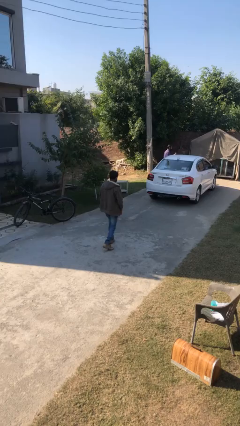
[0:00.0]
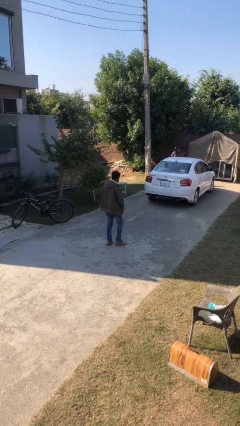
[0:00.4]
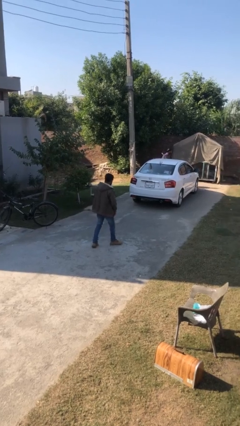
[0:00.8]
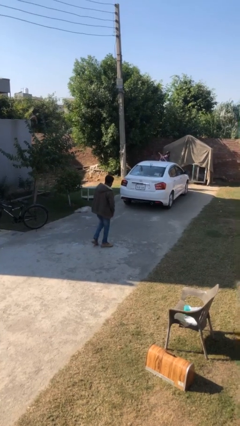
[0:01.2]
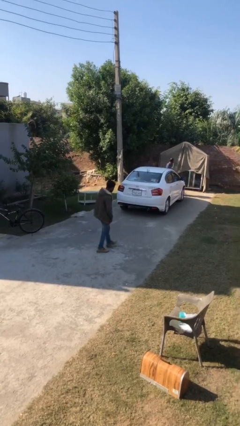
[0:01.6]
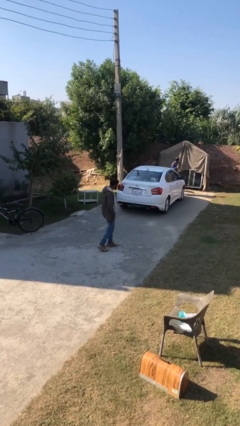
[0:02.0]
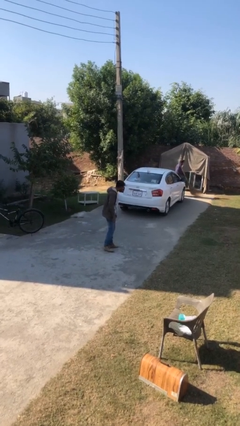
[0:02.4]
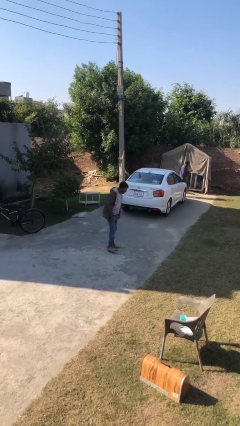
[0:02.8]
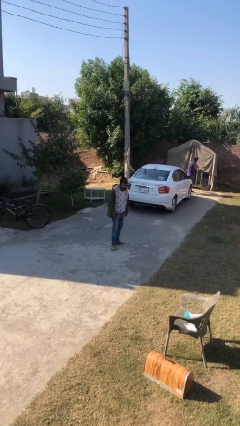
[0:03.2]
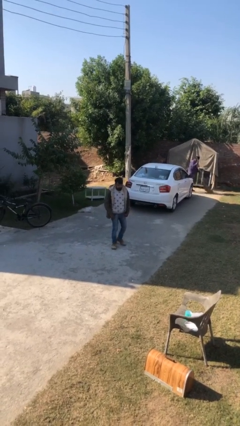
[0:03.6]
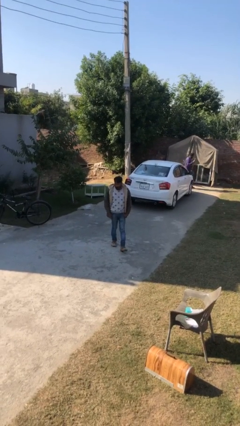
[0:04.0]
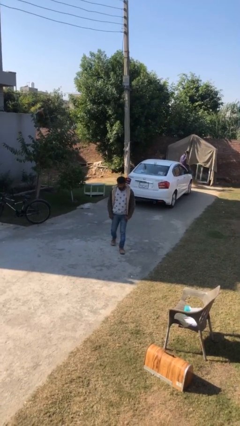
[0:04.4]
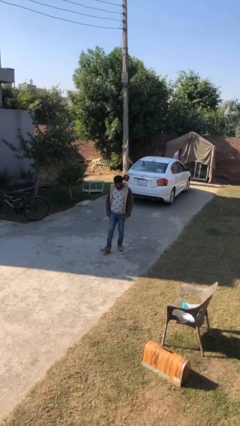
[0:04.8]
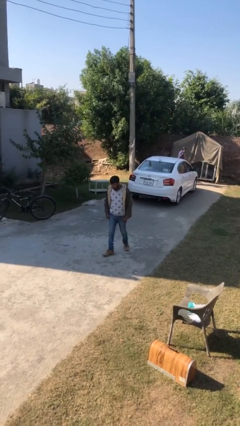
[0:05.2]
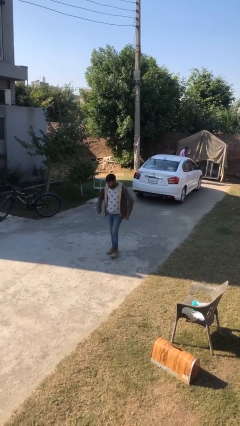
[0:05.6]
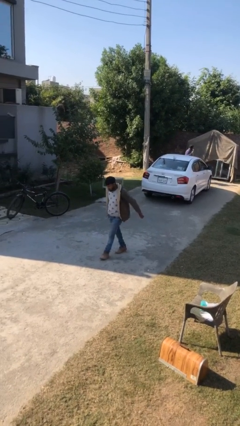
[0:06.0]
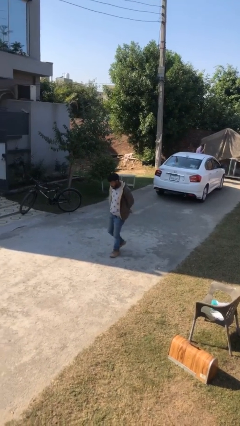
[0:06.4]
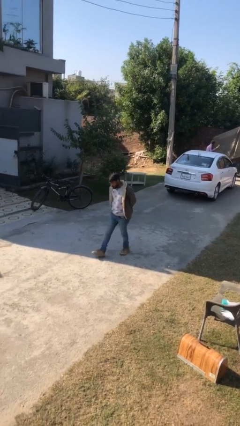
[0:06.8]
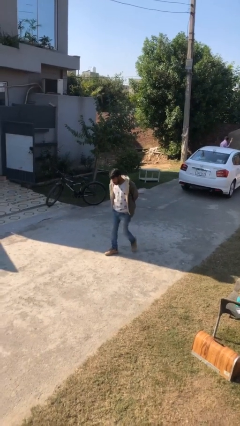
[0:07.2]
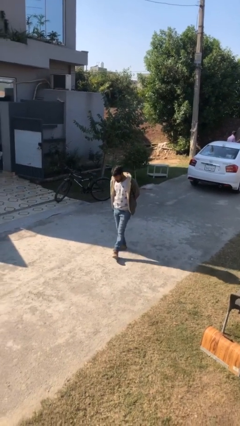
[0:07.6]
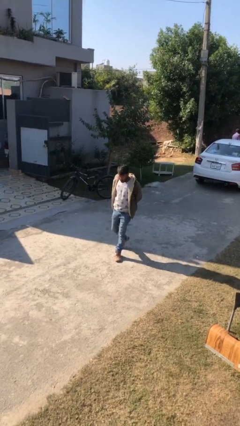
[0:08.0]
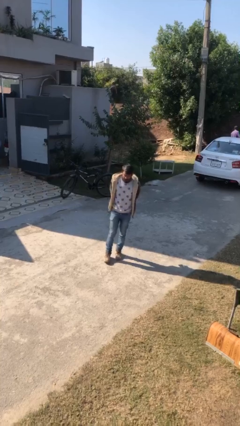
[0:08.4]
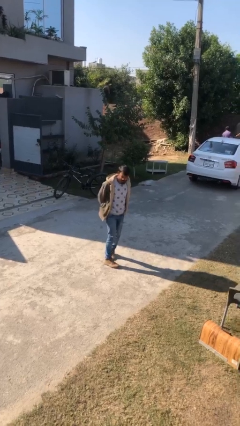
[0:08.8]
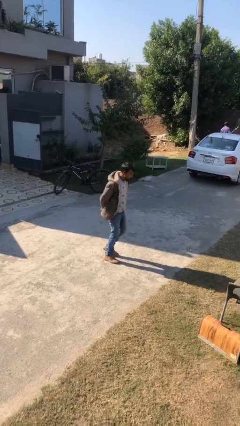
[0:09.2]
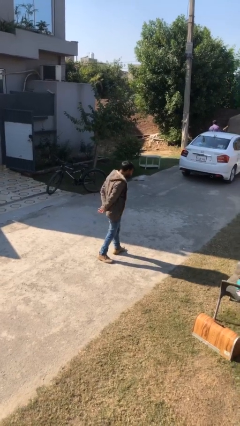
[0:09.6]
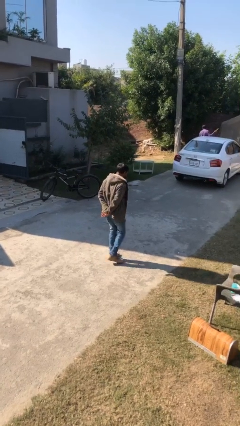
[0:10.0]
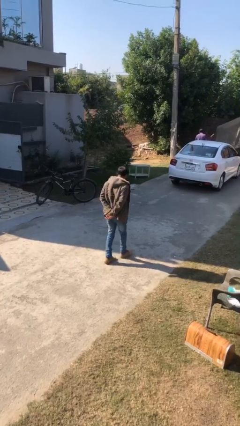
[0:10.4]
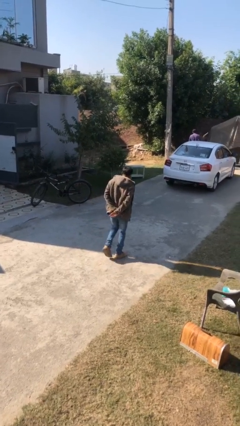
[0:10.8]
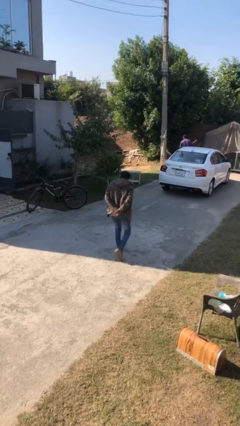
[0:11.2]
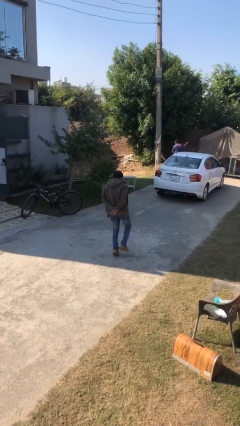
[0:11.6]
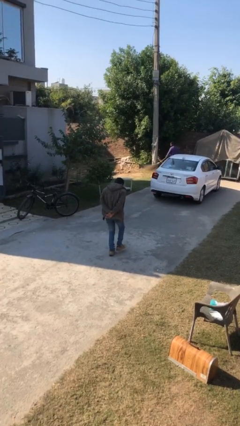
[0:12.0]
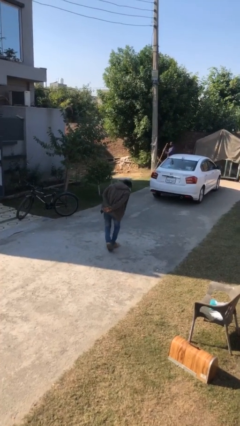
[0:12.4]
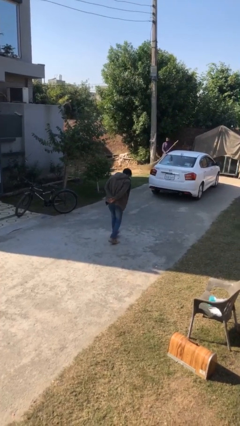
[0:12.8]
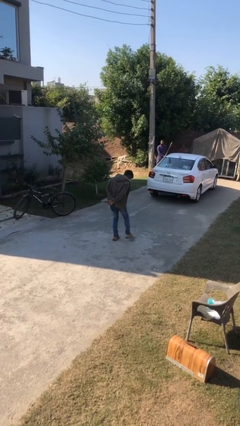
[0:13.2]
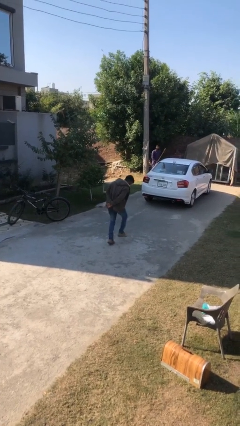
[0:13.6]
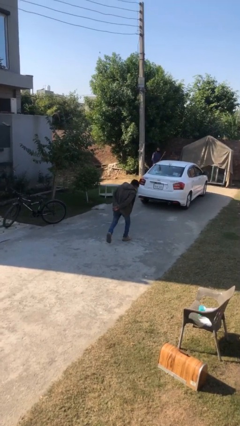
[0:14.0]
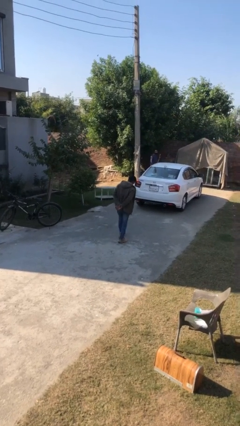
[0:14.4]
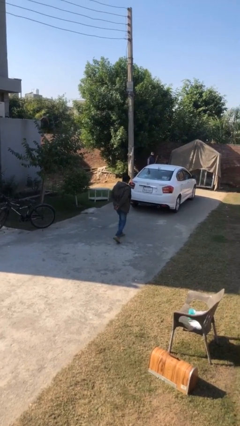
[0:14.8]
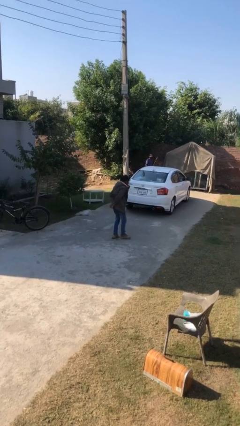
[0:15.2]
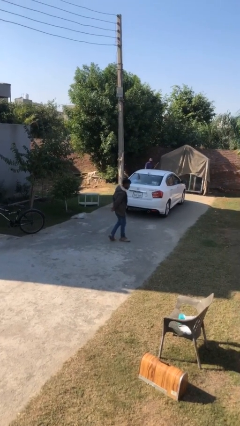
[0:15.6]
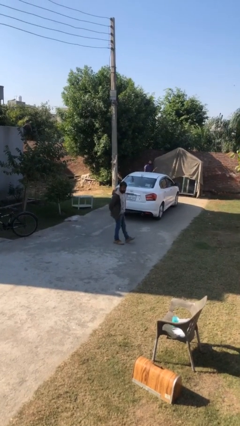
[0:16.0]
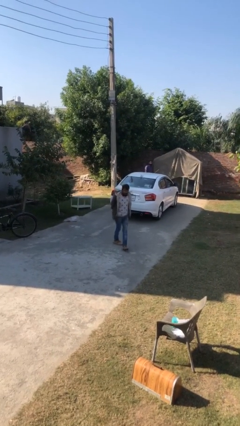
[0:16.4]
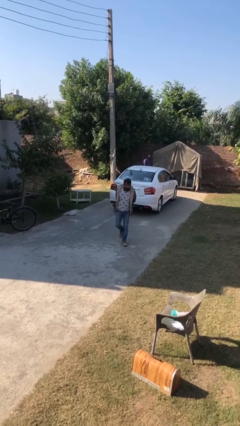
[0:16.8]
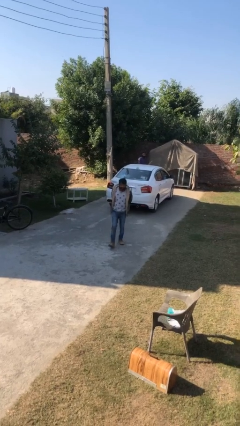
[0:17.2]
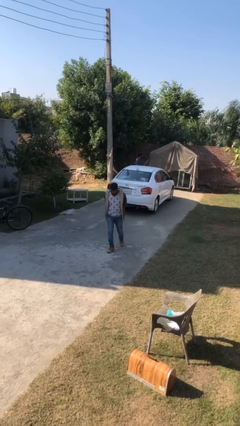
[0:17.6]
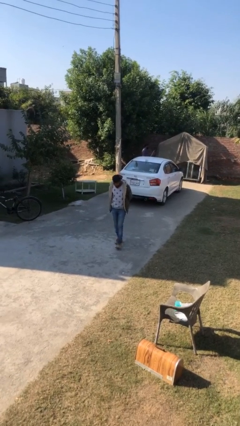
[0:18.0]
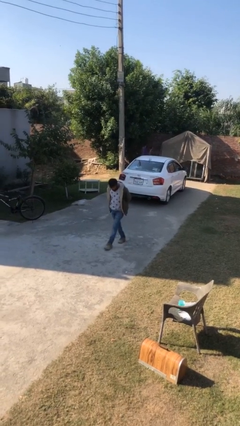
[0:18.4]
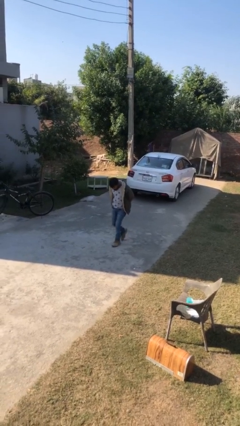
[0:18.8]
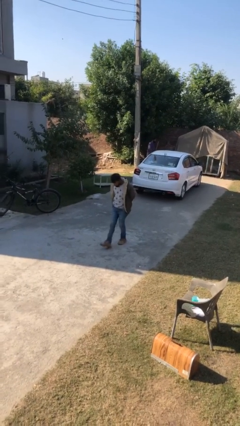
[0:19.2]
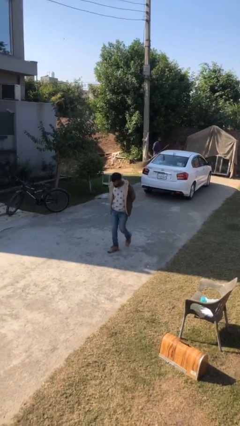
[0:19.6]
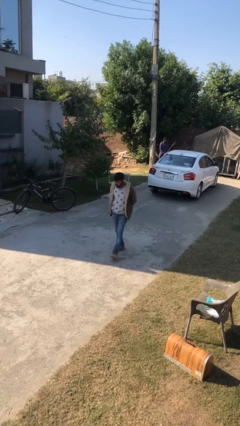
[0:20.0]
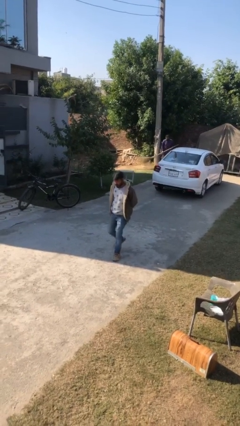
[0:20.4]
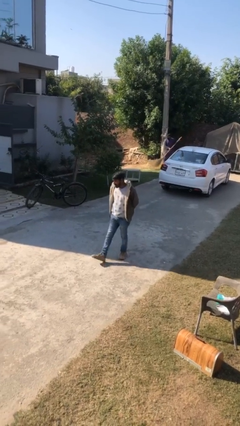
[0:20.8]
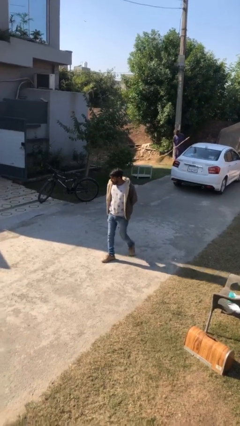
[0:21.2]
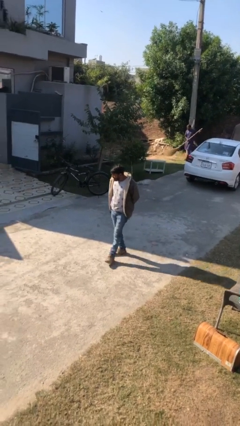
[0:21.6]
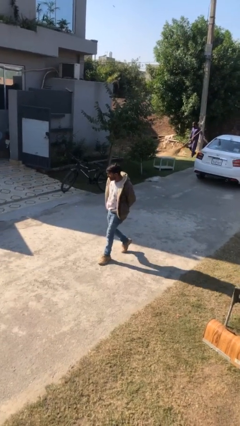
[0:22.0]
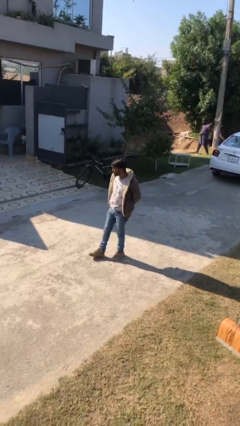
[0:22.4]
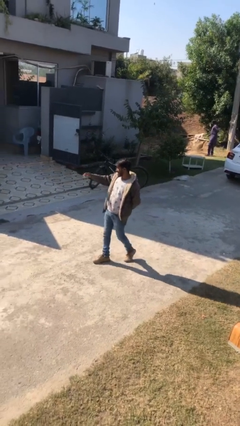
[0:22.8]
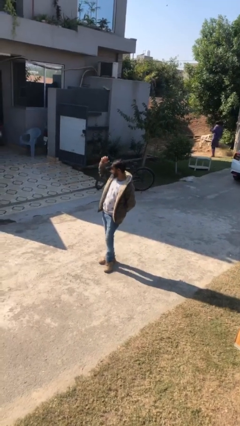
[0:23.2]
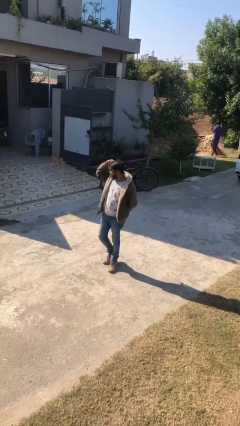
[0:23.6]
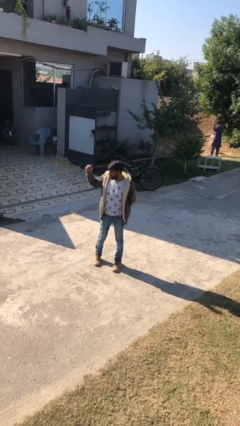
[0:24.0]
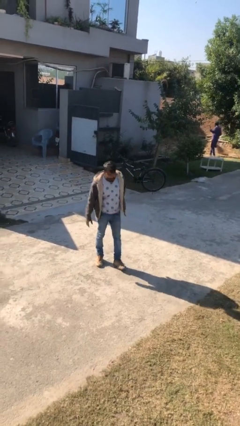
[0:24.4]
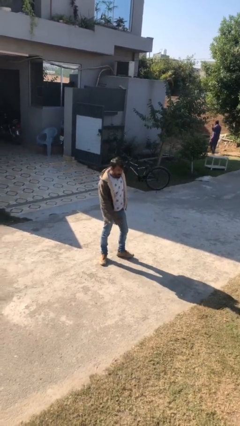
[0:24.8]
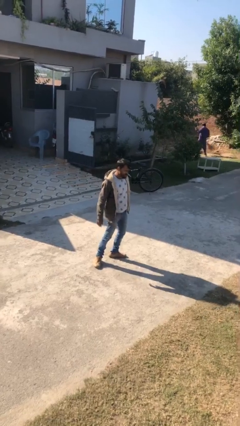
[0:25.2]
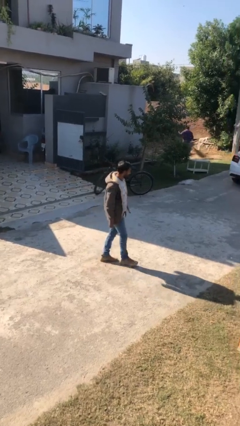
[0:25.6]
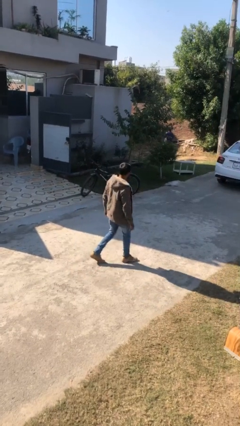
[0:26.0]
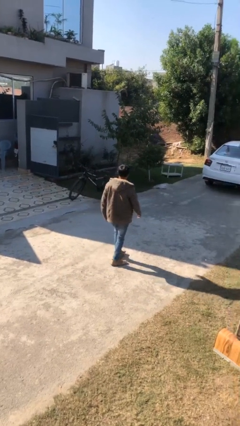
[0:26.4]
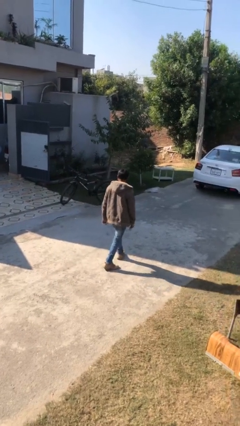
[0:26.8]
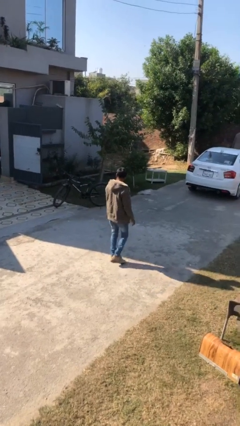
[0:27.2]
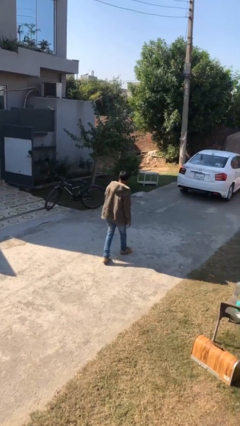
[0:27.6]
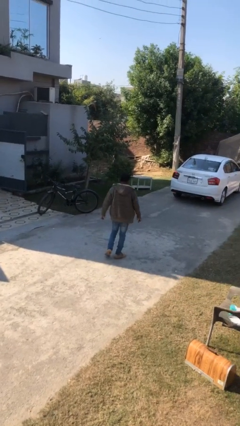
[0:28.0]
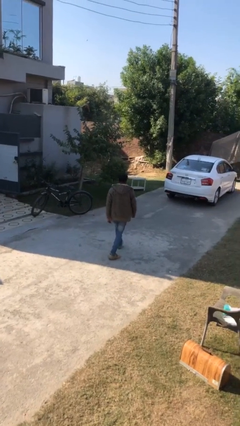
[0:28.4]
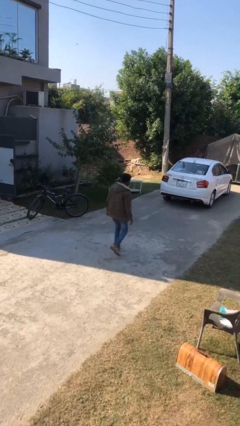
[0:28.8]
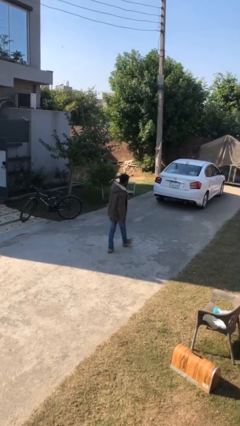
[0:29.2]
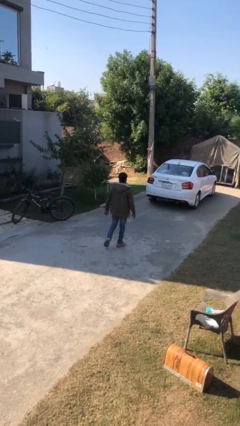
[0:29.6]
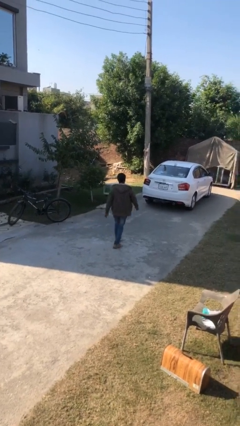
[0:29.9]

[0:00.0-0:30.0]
person walks

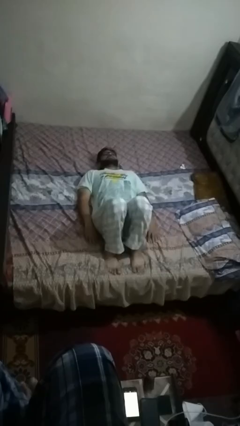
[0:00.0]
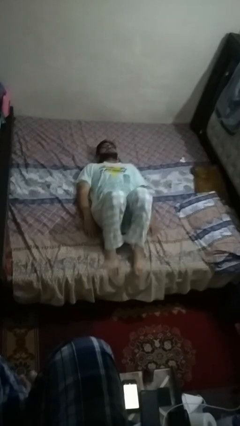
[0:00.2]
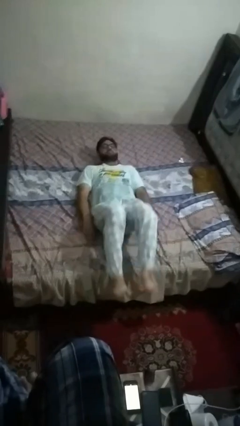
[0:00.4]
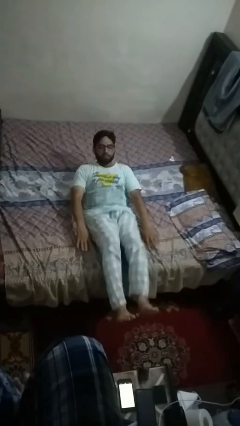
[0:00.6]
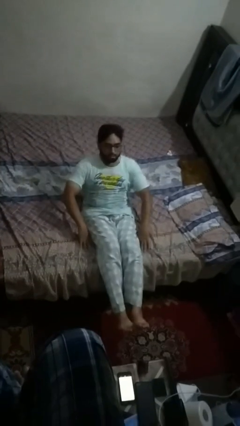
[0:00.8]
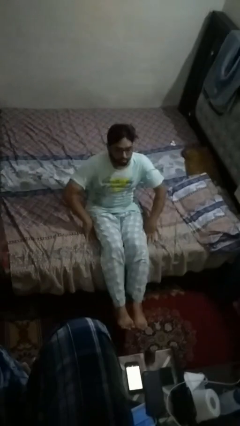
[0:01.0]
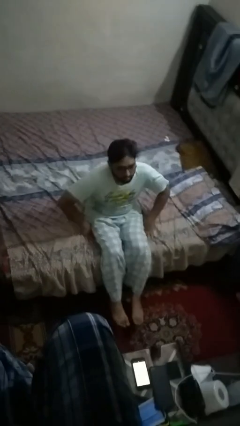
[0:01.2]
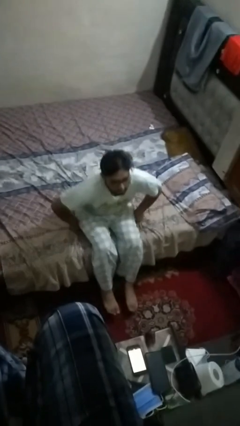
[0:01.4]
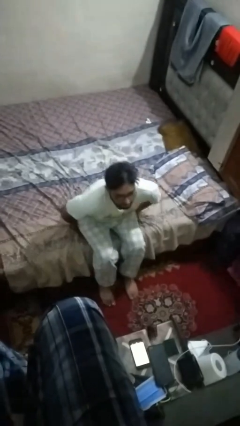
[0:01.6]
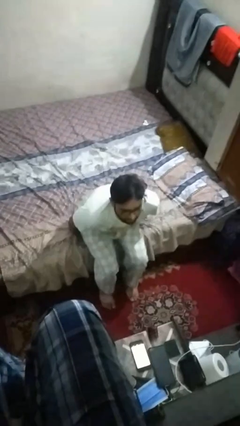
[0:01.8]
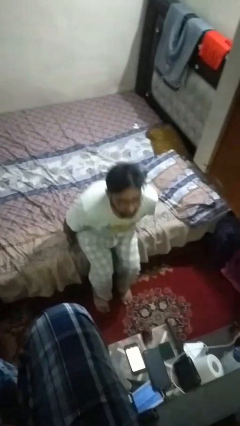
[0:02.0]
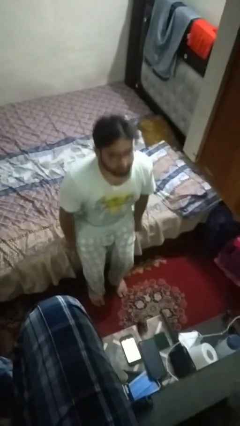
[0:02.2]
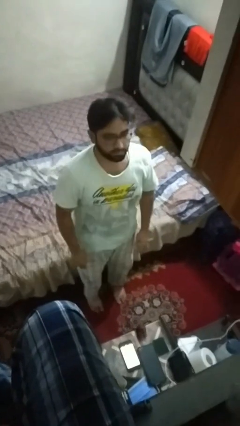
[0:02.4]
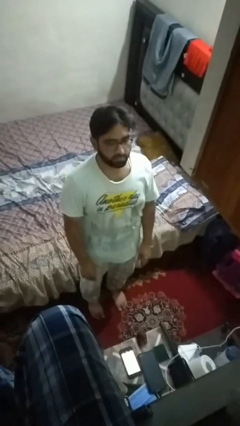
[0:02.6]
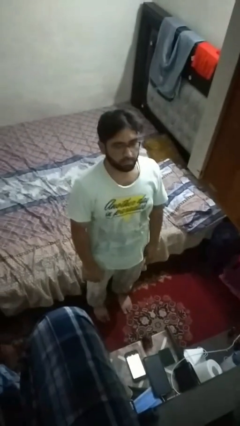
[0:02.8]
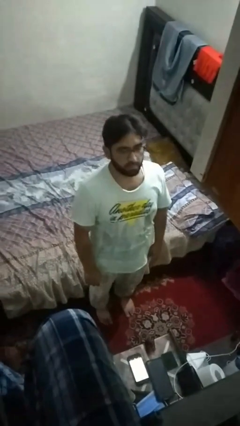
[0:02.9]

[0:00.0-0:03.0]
person stands up
